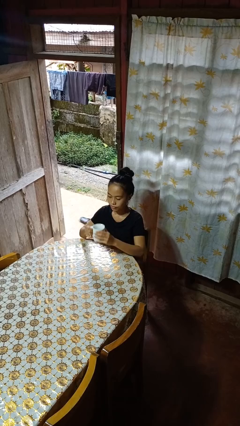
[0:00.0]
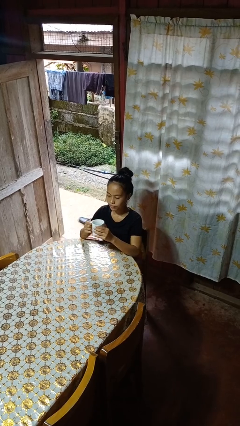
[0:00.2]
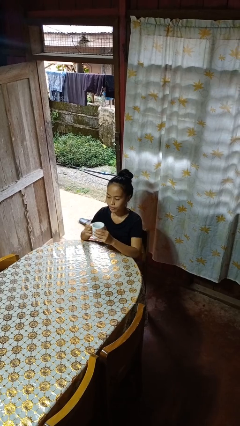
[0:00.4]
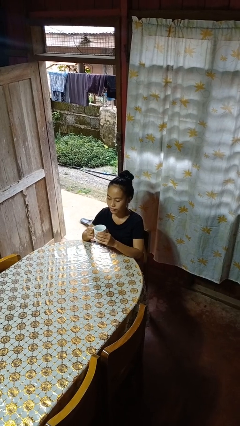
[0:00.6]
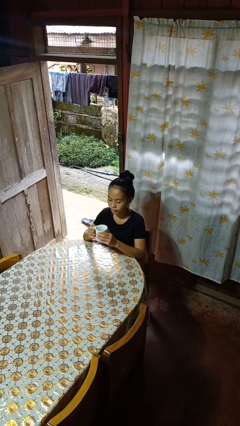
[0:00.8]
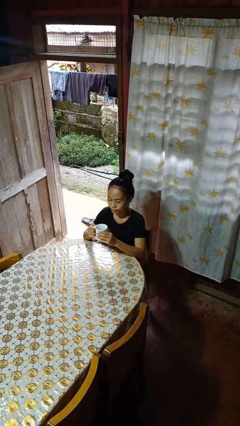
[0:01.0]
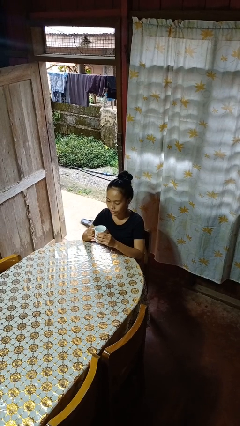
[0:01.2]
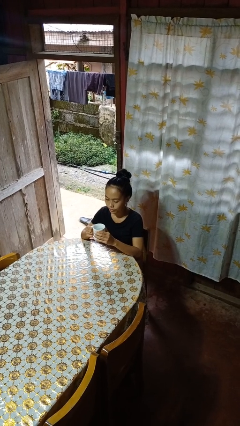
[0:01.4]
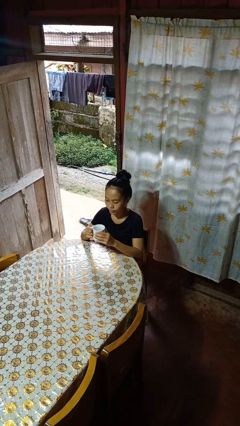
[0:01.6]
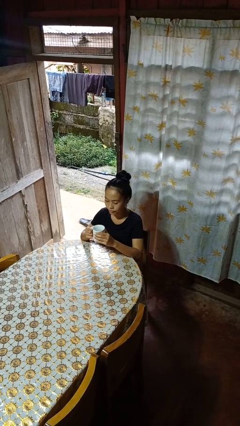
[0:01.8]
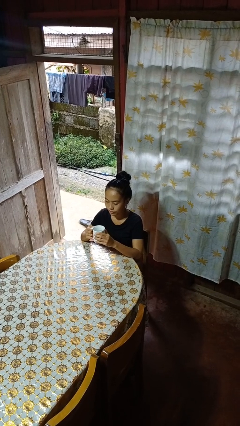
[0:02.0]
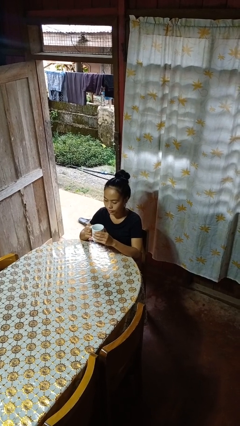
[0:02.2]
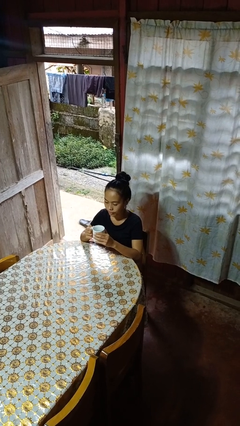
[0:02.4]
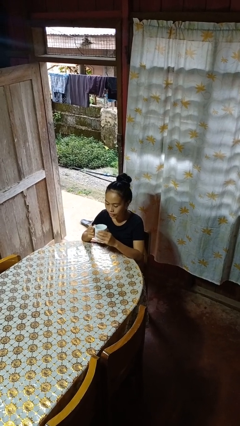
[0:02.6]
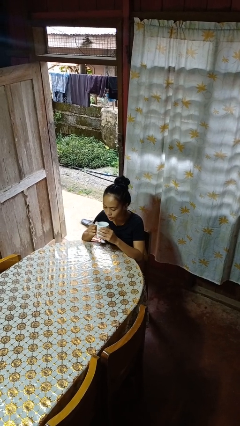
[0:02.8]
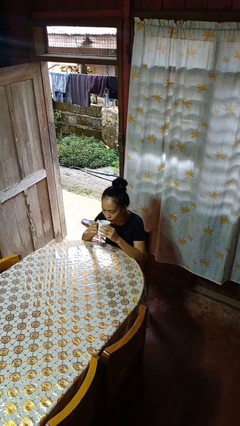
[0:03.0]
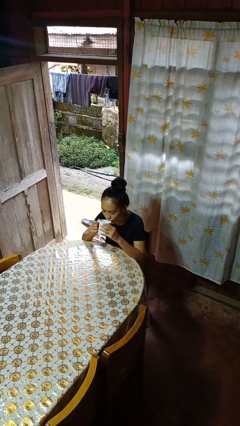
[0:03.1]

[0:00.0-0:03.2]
person picks up object from table

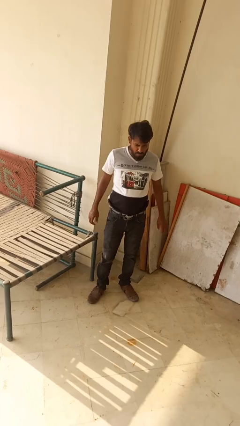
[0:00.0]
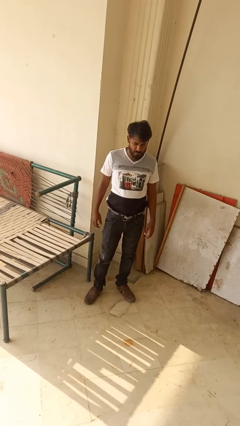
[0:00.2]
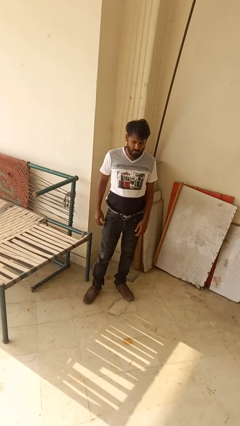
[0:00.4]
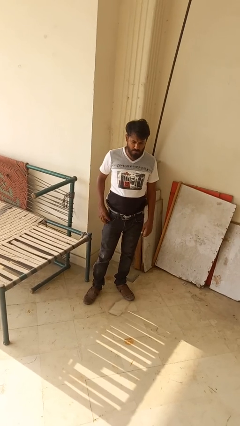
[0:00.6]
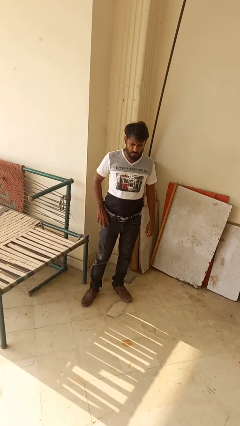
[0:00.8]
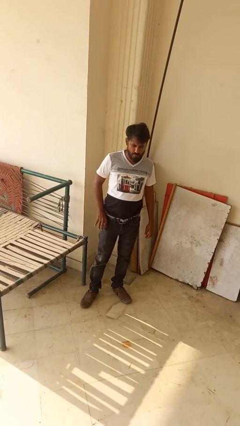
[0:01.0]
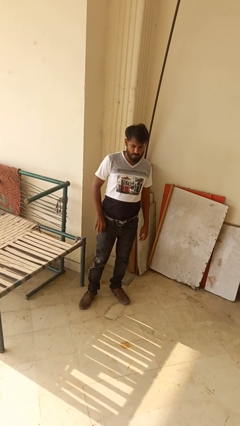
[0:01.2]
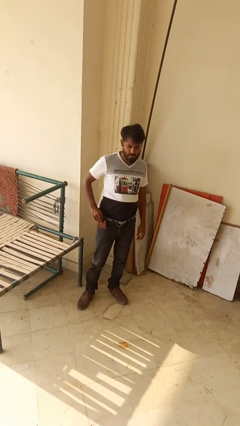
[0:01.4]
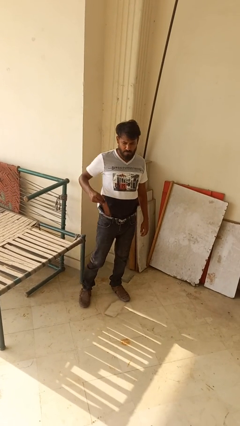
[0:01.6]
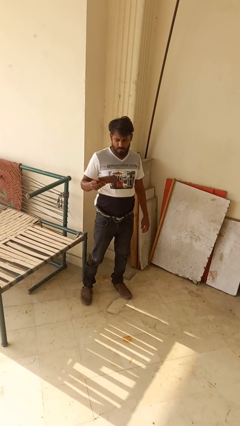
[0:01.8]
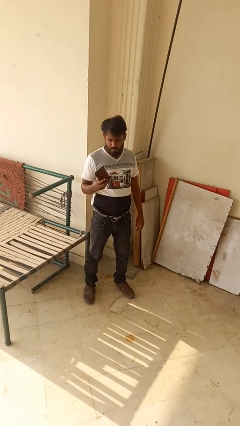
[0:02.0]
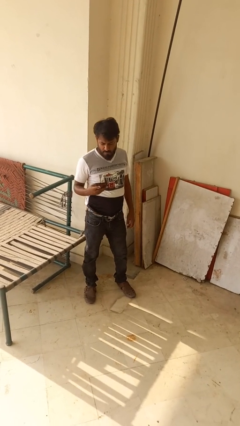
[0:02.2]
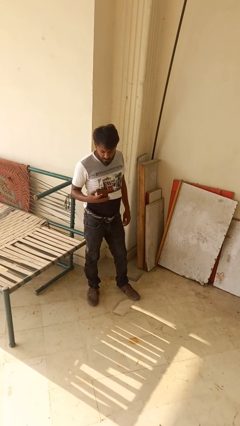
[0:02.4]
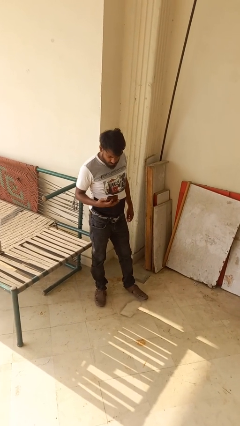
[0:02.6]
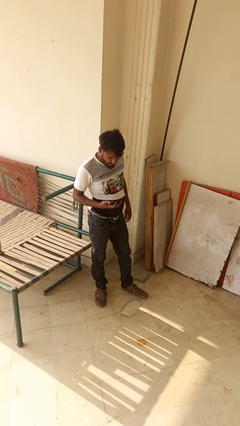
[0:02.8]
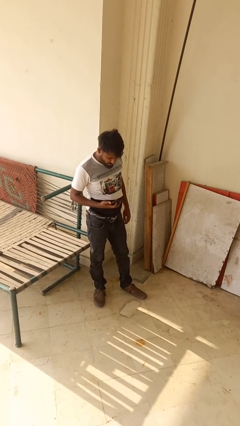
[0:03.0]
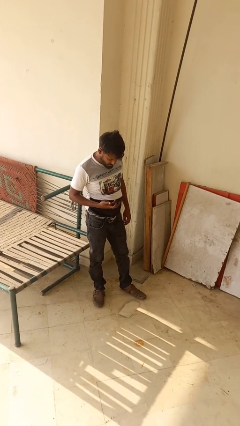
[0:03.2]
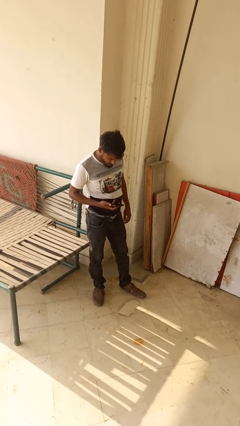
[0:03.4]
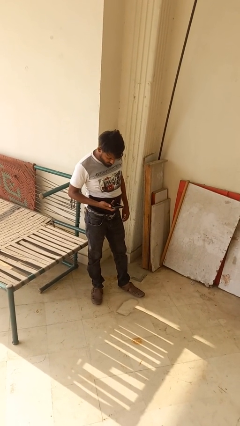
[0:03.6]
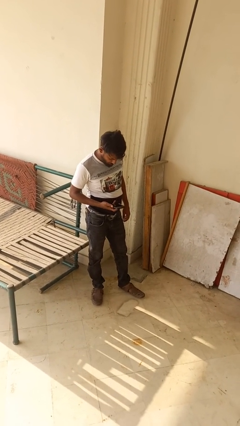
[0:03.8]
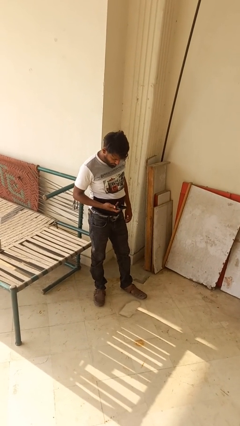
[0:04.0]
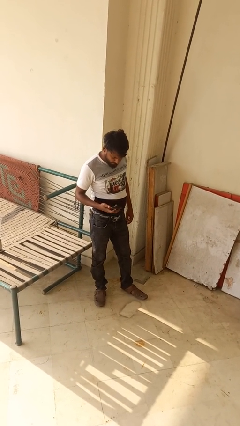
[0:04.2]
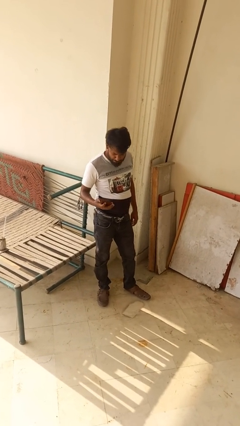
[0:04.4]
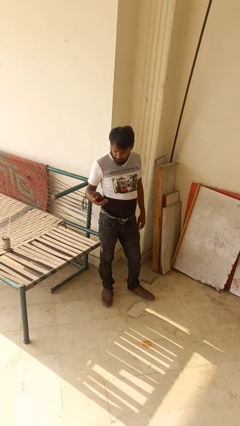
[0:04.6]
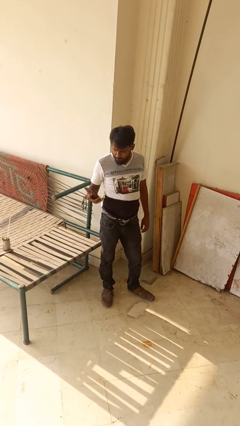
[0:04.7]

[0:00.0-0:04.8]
person takes phone from pocket

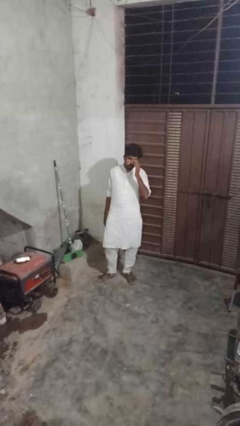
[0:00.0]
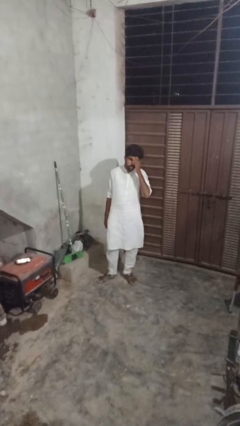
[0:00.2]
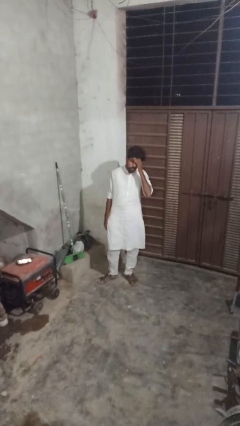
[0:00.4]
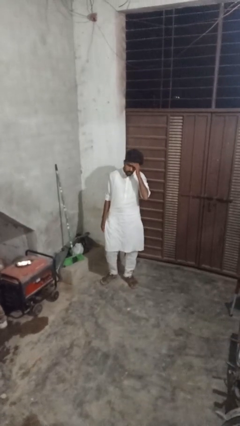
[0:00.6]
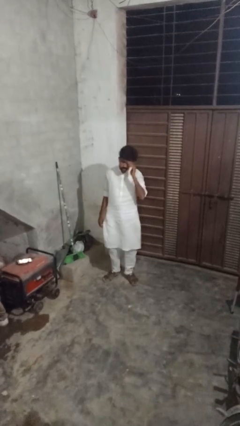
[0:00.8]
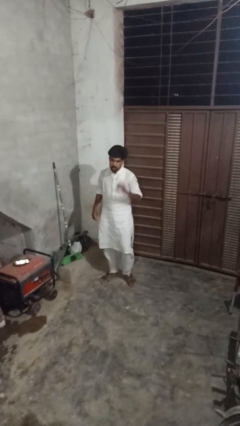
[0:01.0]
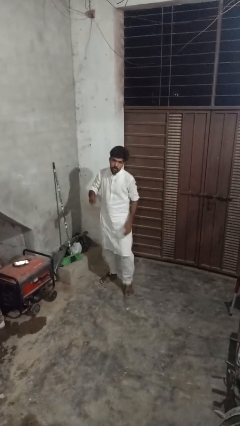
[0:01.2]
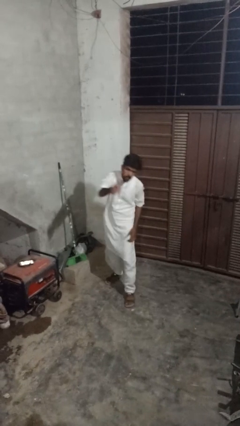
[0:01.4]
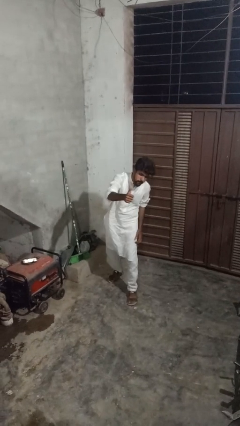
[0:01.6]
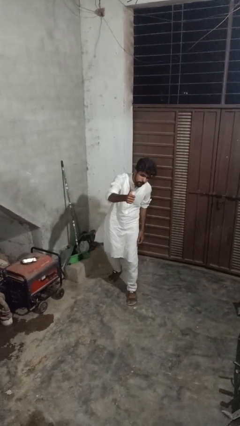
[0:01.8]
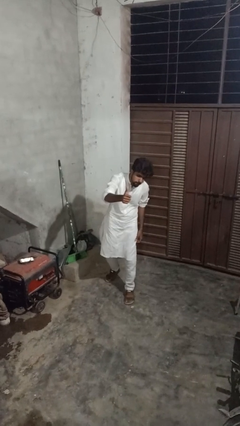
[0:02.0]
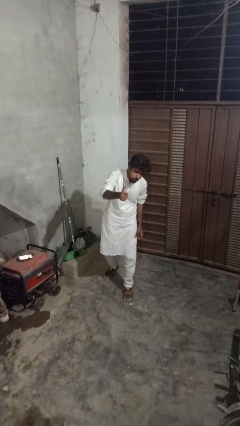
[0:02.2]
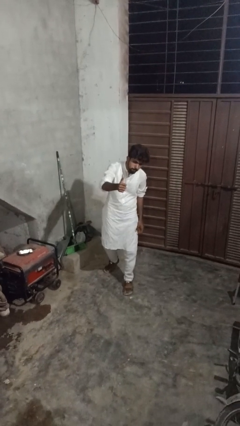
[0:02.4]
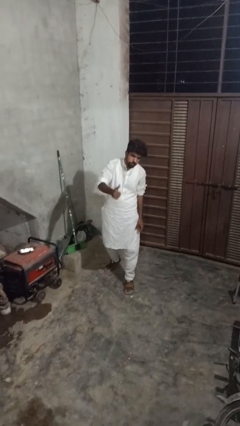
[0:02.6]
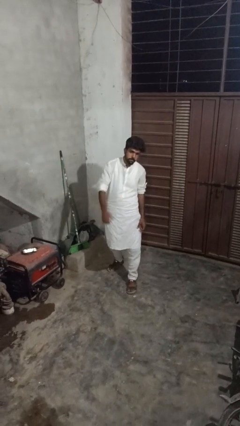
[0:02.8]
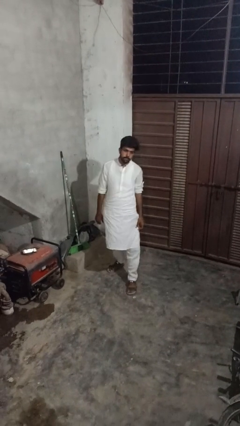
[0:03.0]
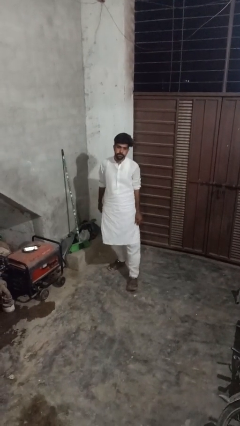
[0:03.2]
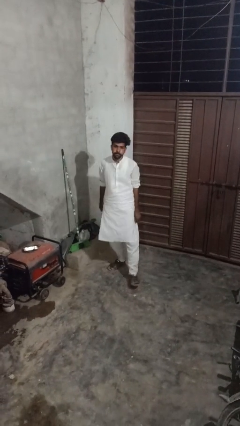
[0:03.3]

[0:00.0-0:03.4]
person gestures thumbs up

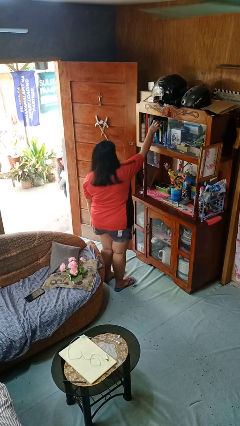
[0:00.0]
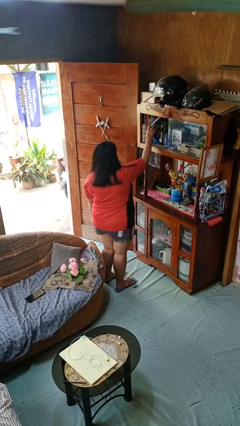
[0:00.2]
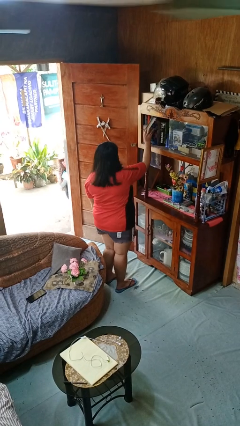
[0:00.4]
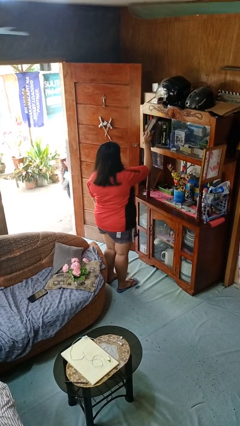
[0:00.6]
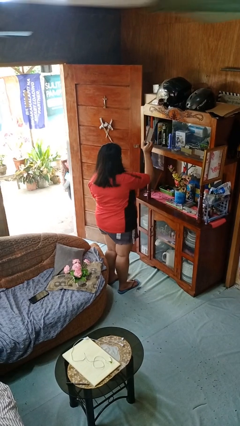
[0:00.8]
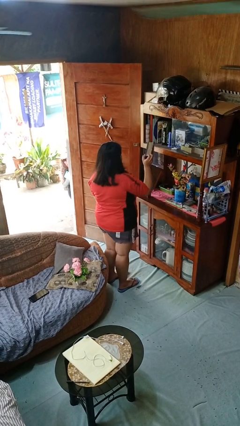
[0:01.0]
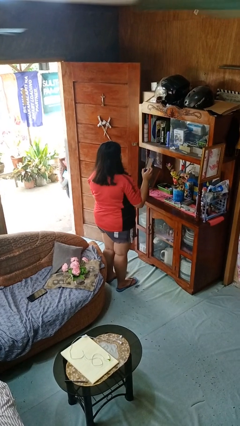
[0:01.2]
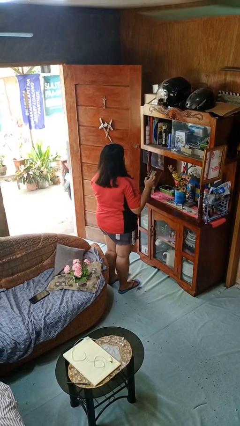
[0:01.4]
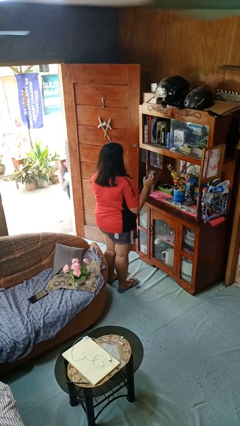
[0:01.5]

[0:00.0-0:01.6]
person picks up object from shelf

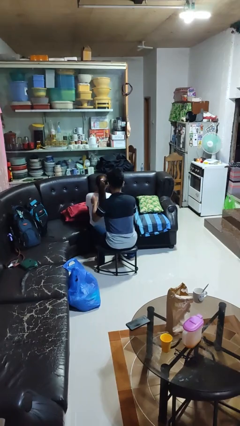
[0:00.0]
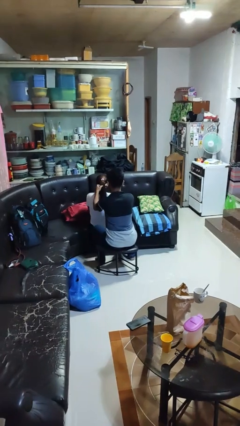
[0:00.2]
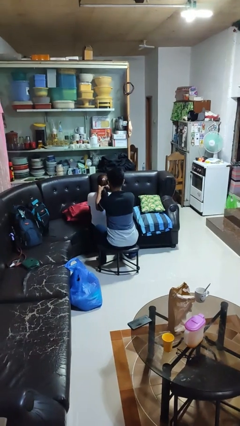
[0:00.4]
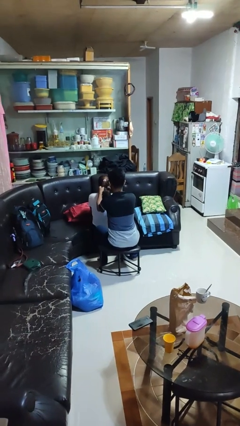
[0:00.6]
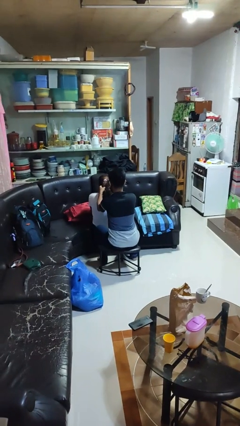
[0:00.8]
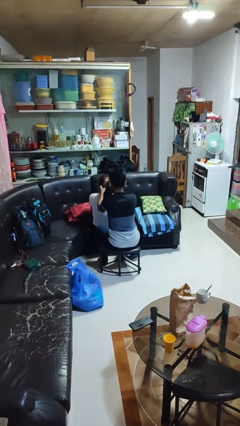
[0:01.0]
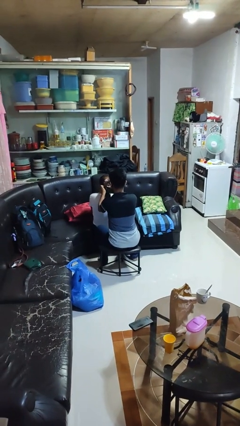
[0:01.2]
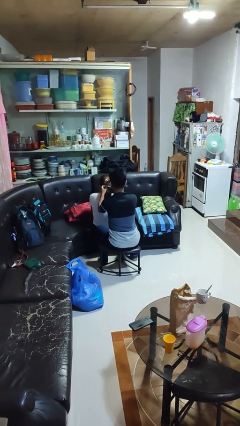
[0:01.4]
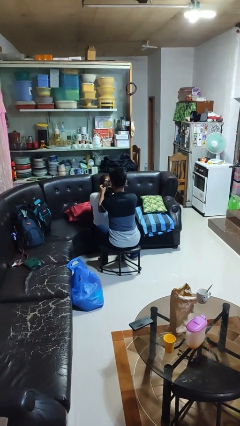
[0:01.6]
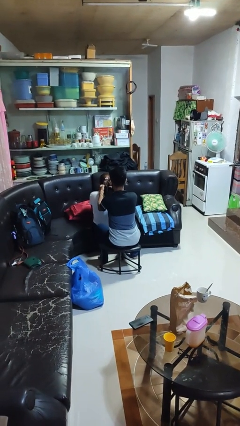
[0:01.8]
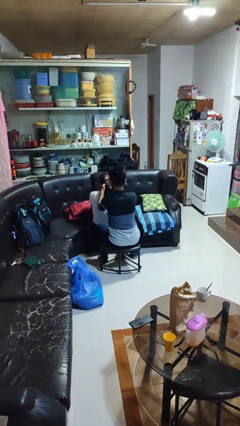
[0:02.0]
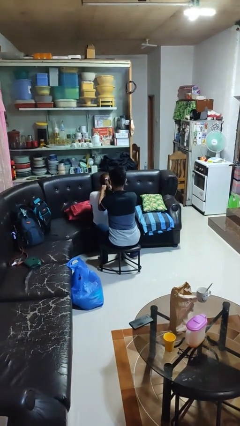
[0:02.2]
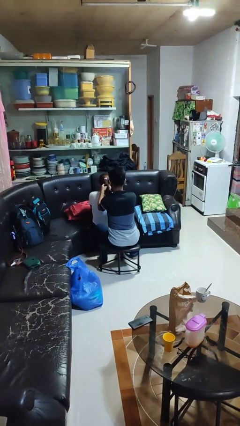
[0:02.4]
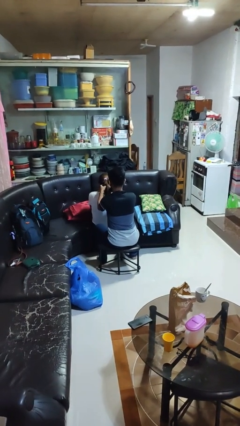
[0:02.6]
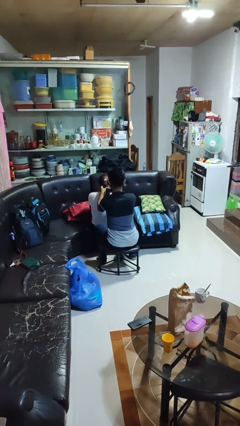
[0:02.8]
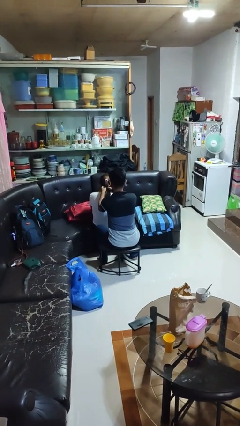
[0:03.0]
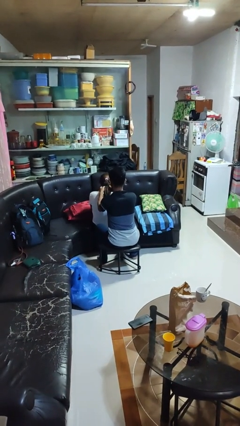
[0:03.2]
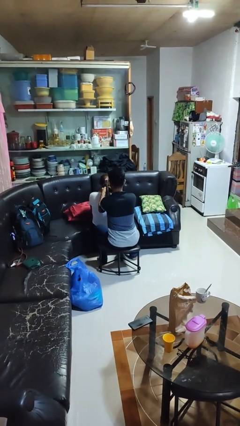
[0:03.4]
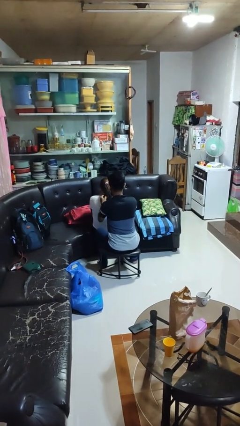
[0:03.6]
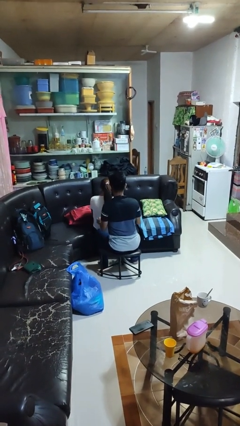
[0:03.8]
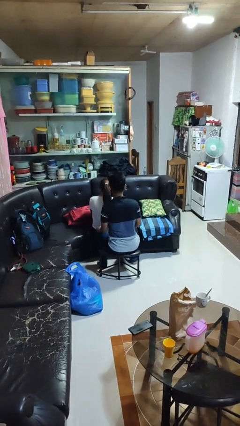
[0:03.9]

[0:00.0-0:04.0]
person braids hair of person

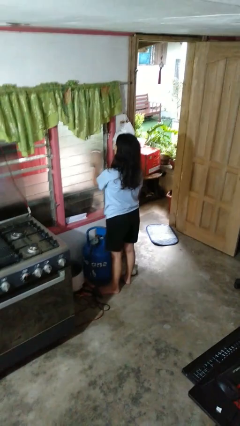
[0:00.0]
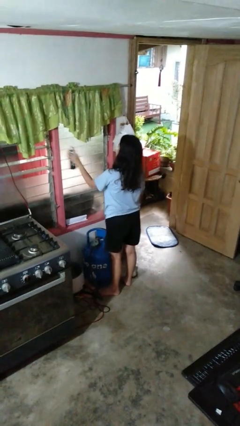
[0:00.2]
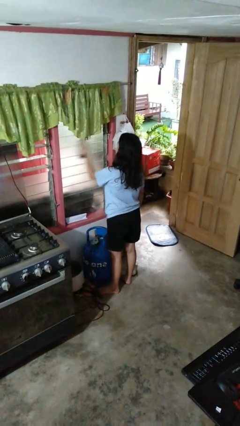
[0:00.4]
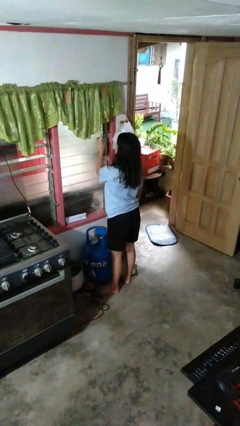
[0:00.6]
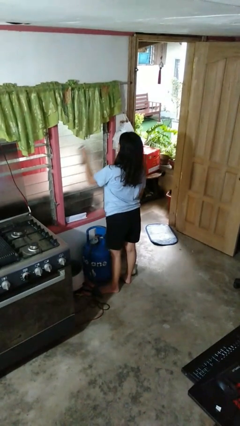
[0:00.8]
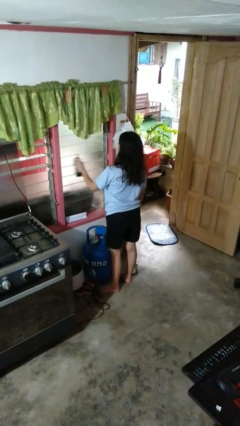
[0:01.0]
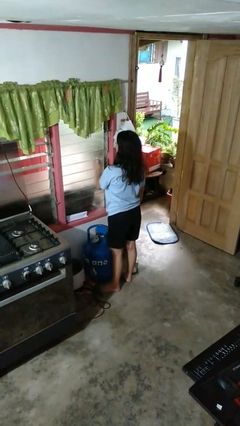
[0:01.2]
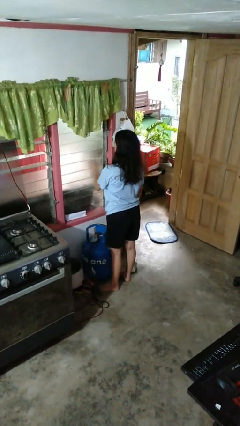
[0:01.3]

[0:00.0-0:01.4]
person sprays from bottle
